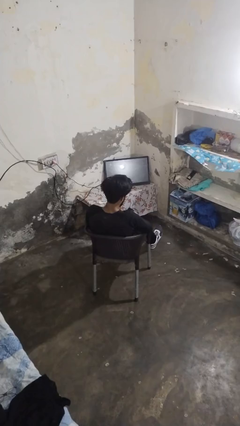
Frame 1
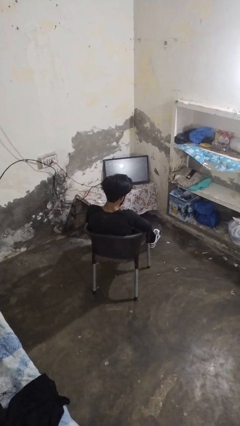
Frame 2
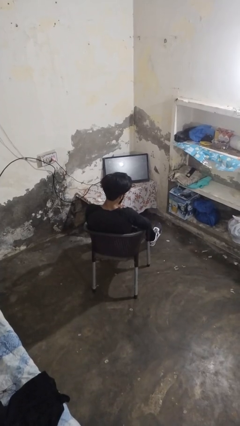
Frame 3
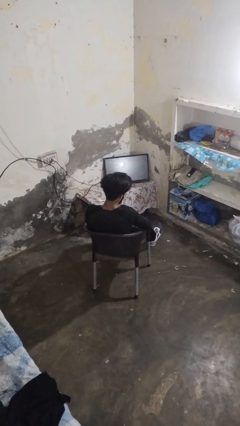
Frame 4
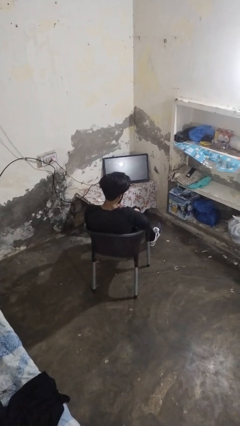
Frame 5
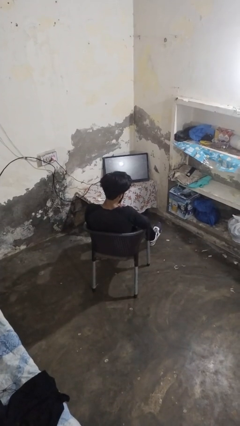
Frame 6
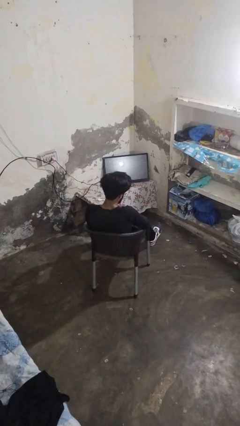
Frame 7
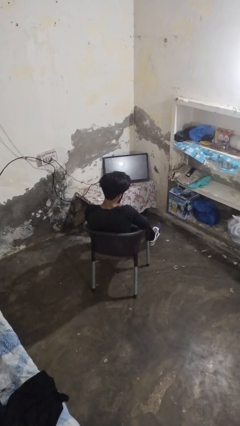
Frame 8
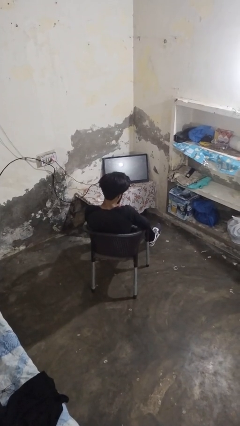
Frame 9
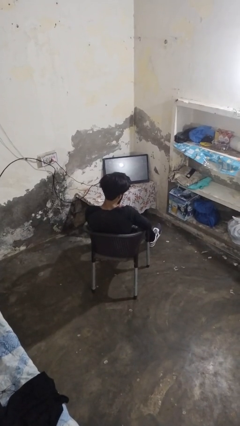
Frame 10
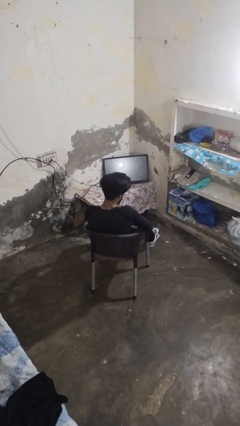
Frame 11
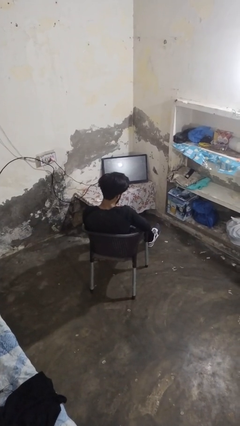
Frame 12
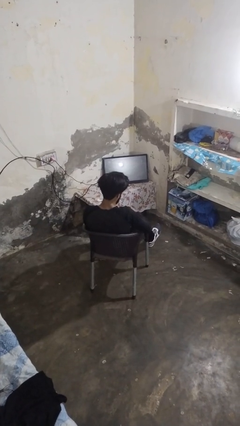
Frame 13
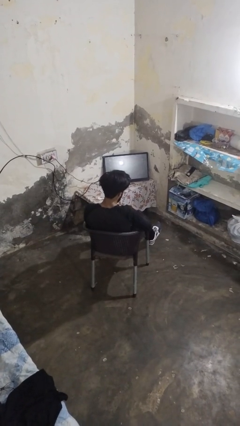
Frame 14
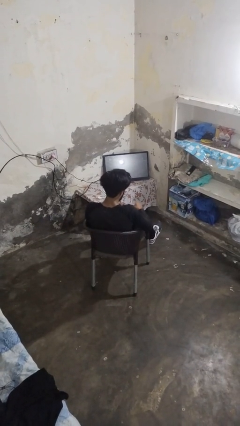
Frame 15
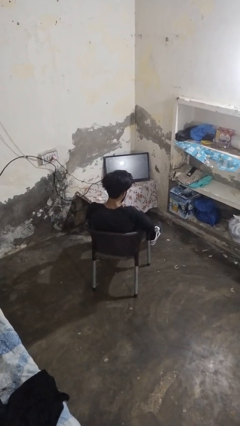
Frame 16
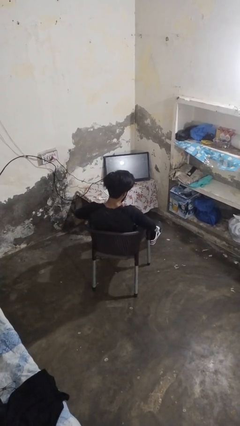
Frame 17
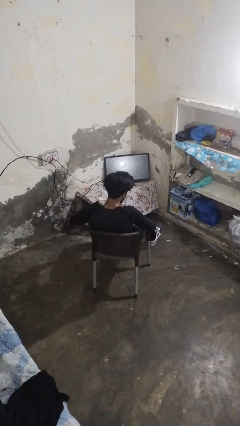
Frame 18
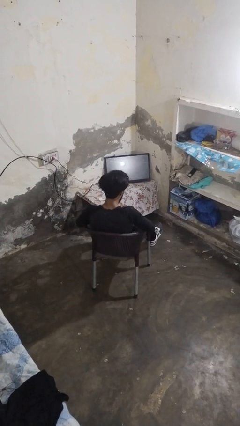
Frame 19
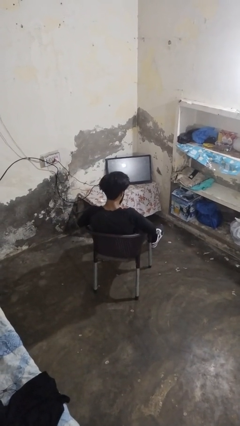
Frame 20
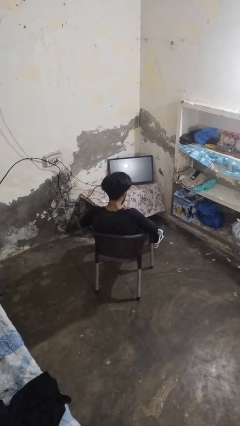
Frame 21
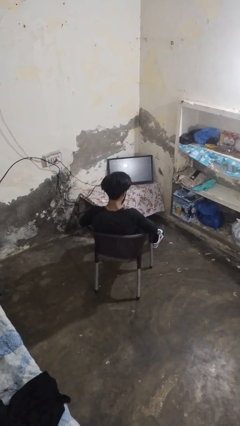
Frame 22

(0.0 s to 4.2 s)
person takes off gloves

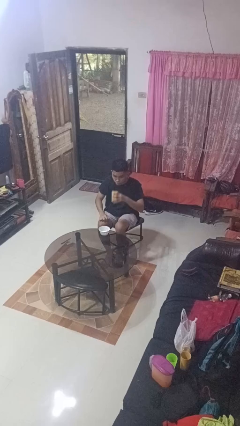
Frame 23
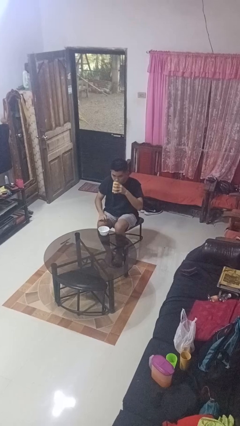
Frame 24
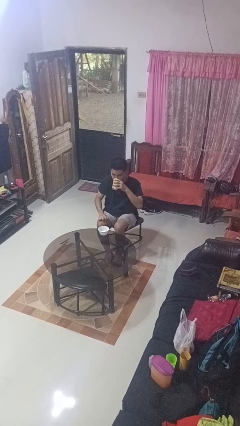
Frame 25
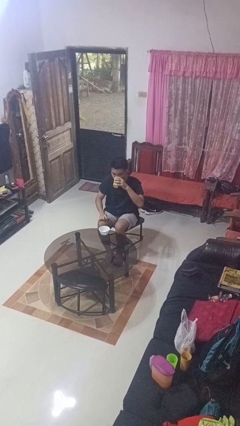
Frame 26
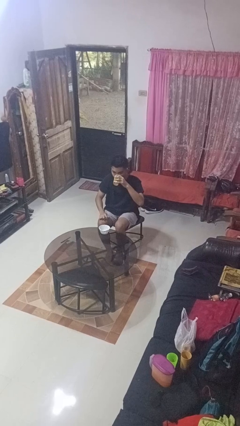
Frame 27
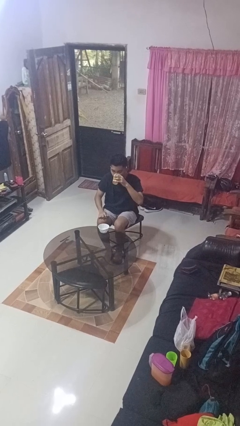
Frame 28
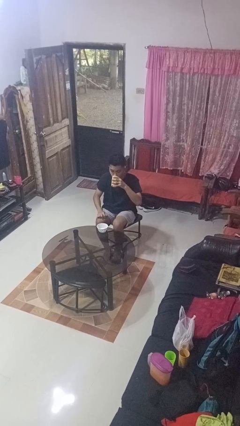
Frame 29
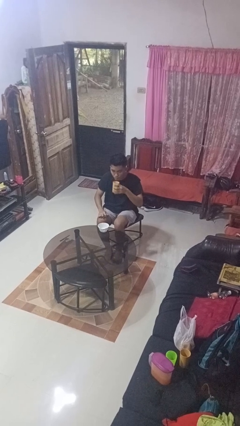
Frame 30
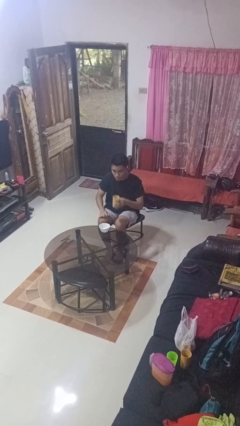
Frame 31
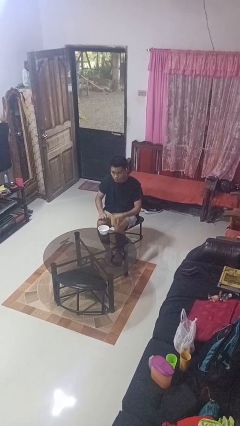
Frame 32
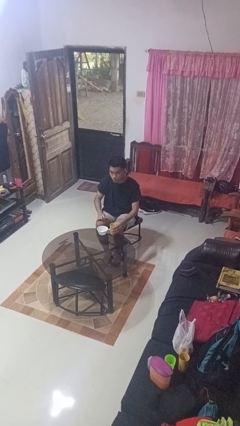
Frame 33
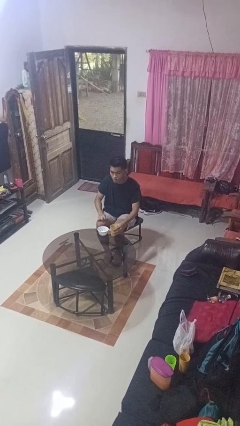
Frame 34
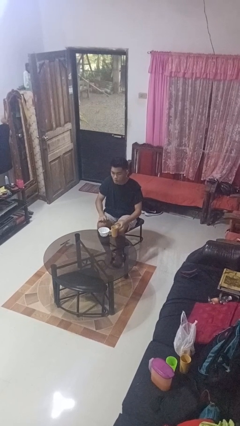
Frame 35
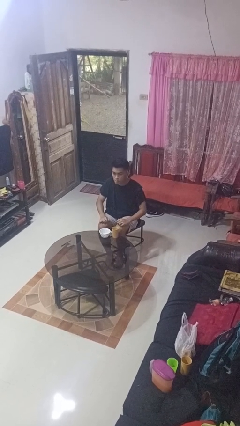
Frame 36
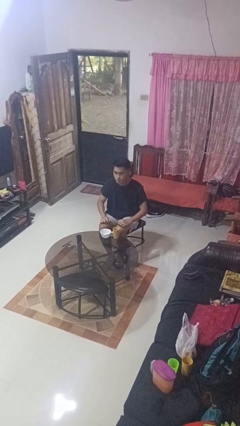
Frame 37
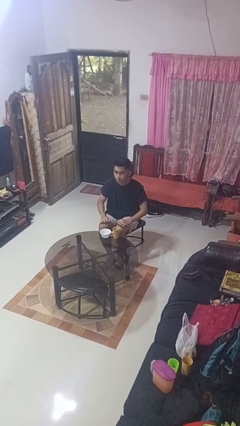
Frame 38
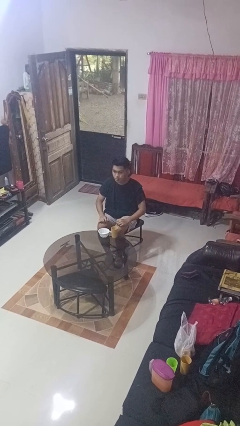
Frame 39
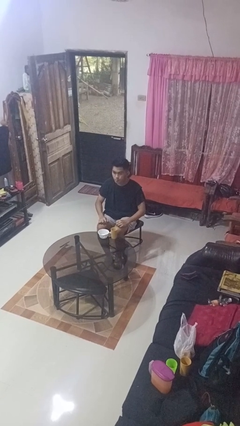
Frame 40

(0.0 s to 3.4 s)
person drinks from cup

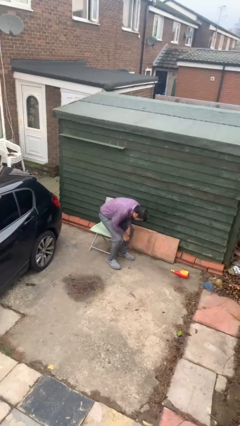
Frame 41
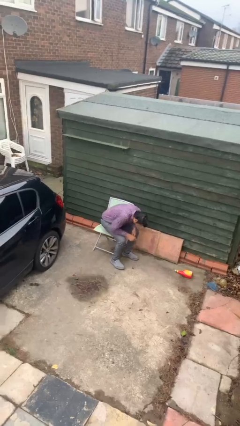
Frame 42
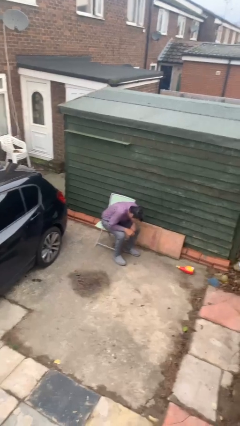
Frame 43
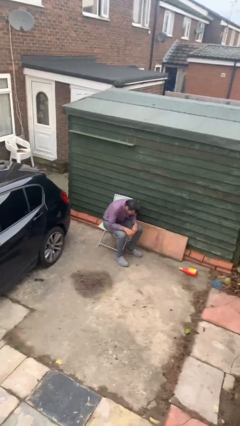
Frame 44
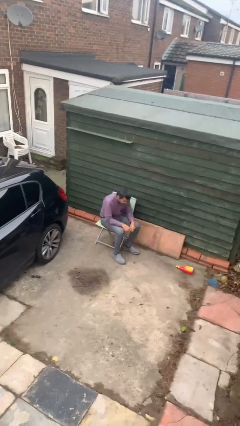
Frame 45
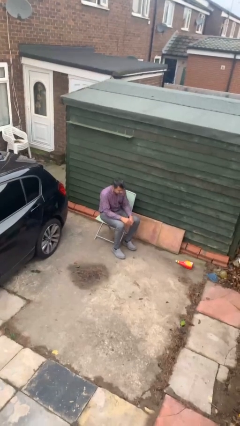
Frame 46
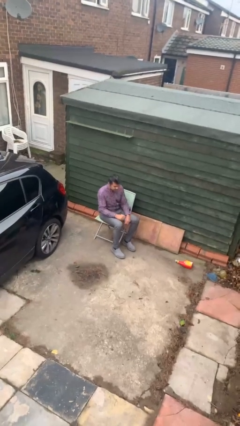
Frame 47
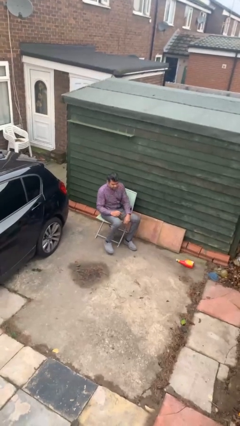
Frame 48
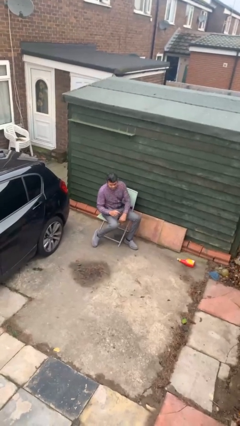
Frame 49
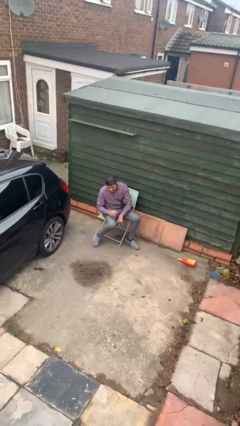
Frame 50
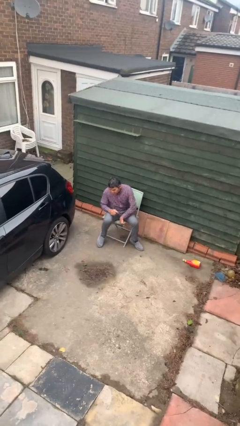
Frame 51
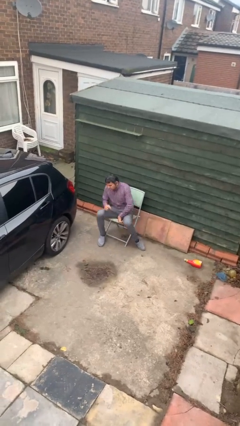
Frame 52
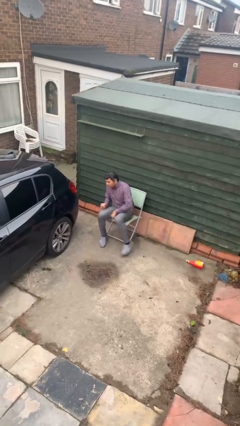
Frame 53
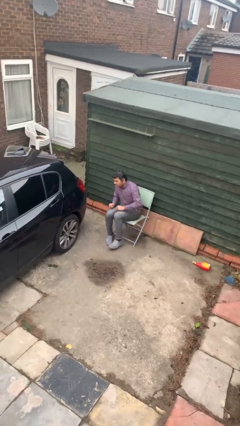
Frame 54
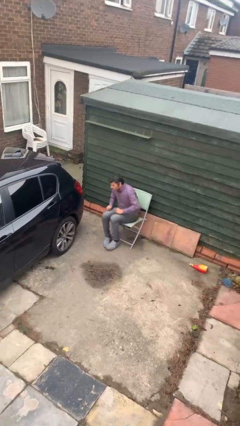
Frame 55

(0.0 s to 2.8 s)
person sits down

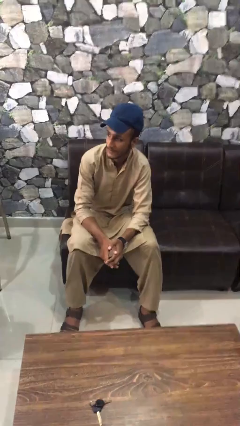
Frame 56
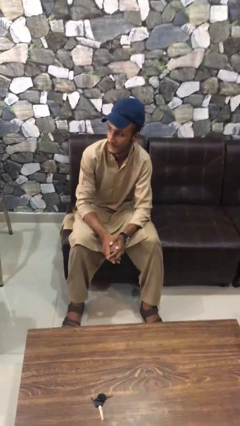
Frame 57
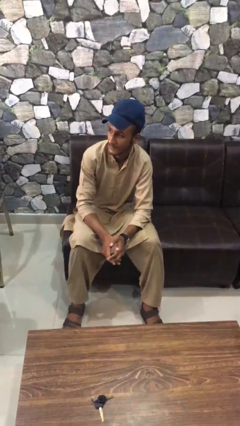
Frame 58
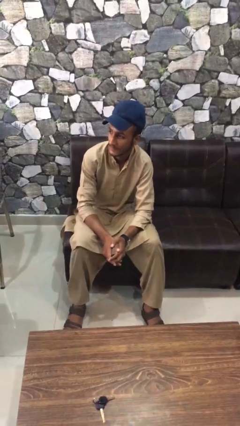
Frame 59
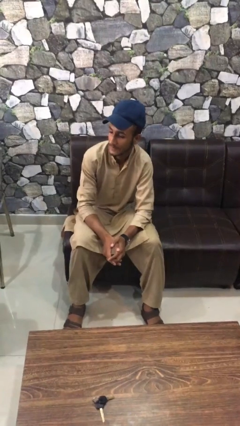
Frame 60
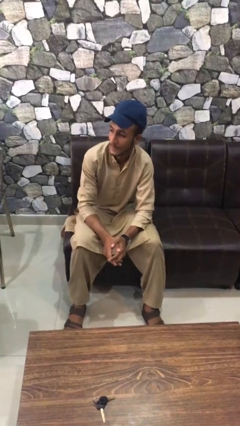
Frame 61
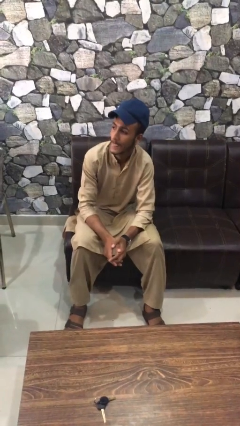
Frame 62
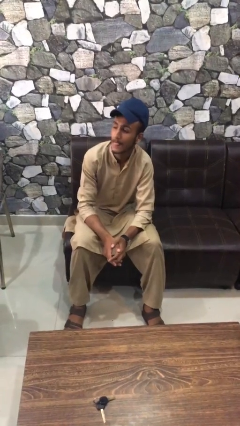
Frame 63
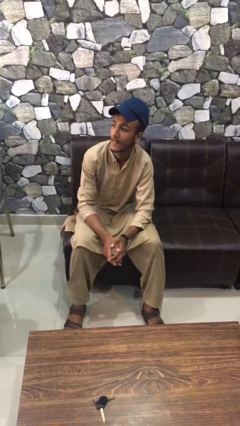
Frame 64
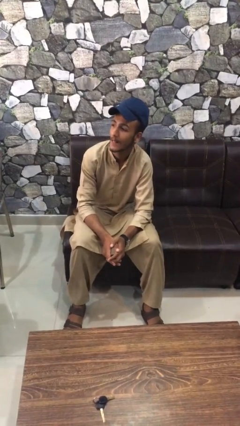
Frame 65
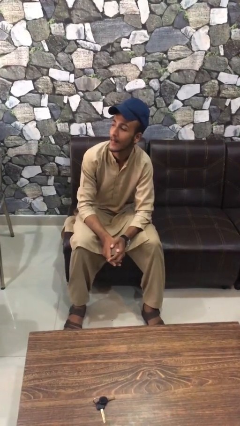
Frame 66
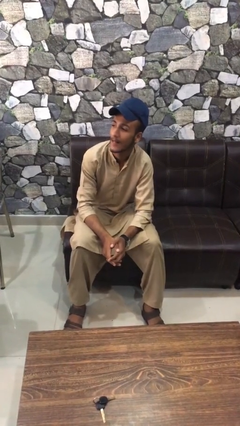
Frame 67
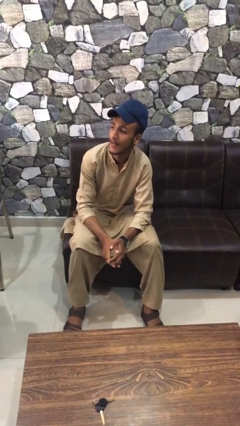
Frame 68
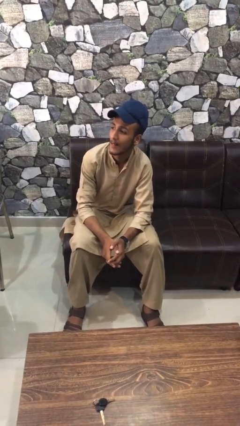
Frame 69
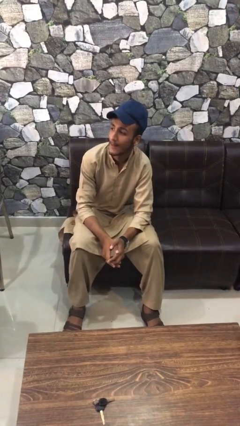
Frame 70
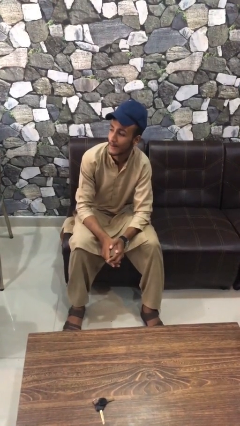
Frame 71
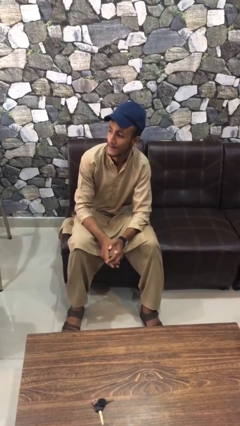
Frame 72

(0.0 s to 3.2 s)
person sticks out tongue

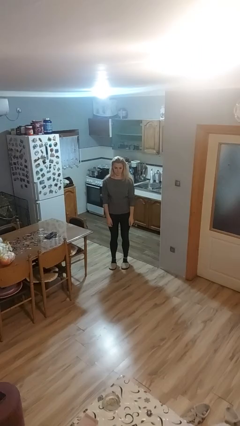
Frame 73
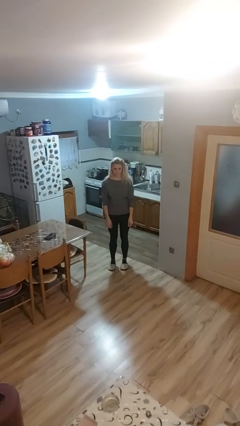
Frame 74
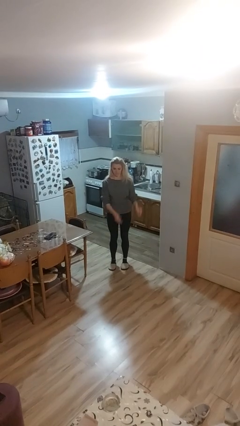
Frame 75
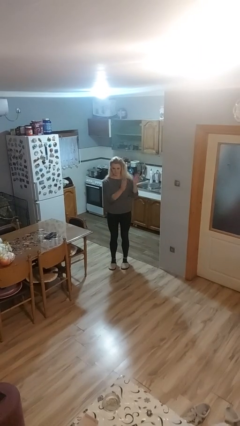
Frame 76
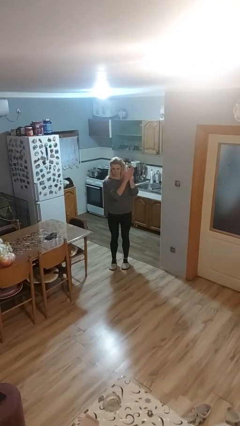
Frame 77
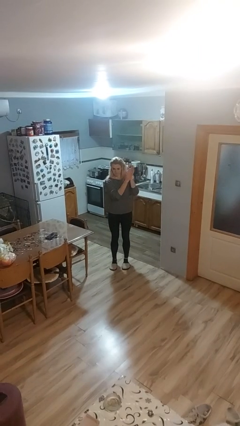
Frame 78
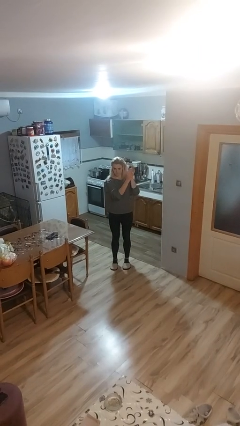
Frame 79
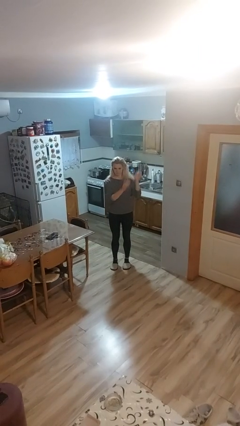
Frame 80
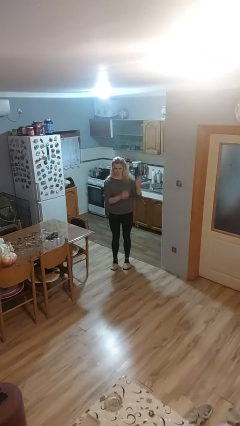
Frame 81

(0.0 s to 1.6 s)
person claps hands

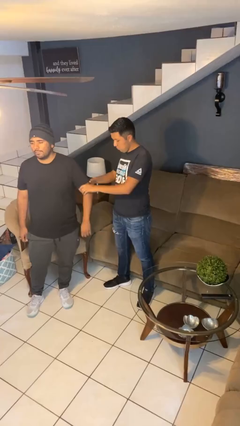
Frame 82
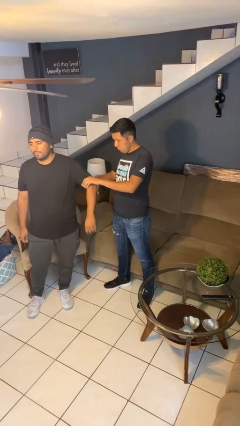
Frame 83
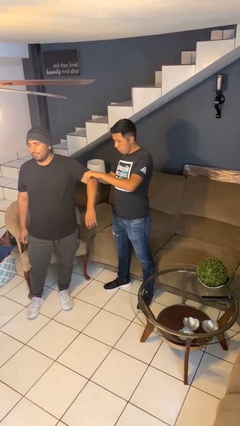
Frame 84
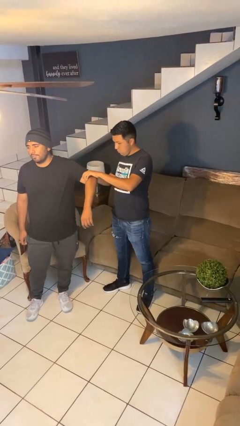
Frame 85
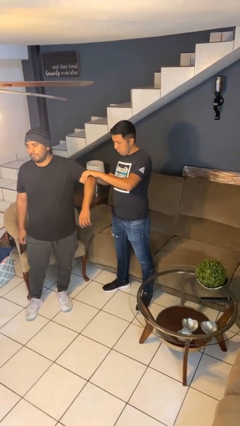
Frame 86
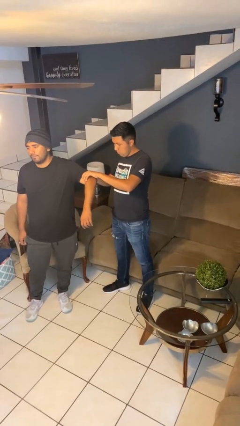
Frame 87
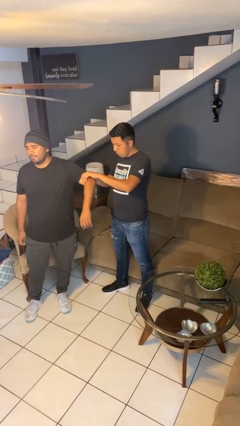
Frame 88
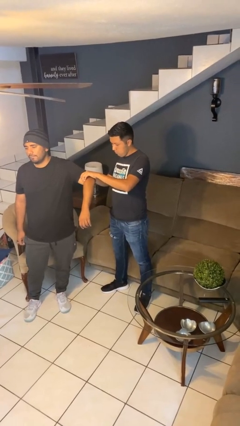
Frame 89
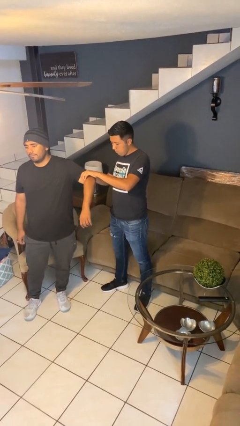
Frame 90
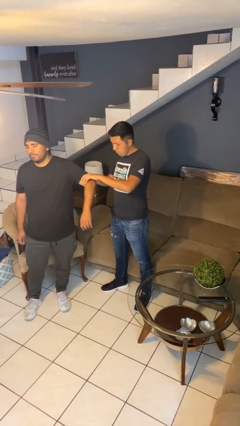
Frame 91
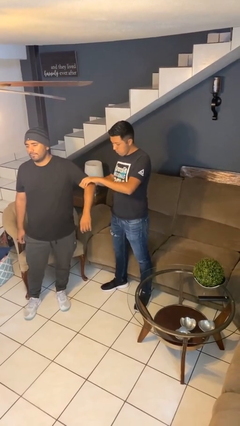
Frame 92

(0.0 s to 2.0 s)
person grabs person by bicep
